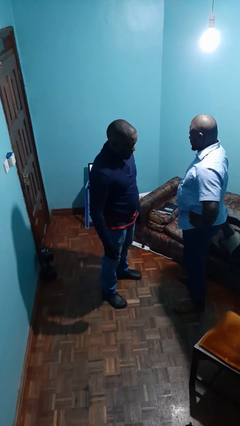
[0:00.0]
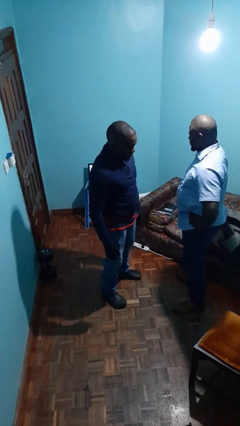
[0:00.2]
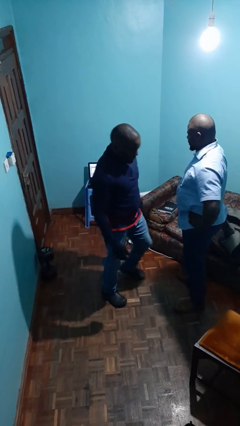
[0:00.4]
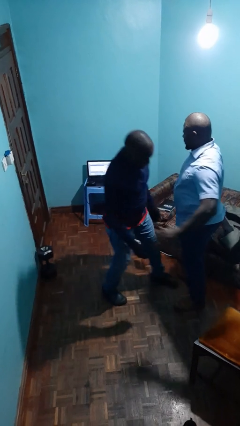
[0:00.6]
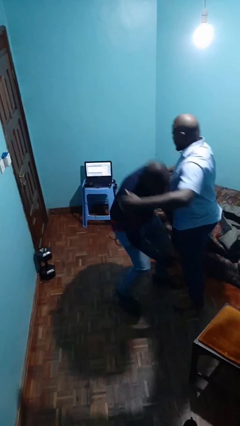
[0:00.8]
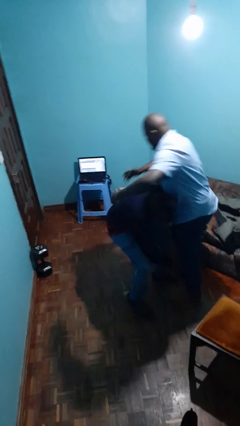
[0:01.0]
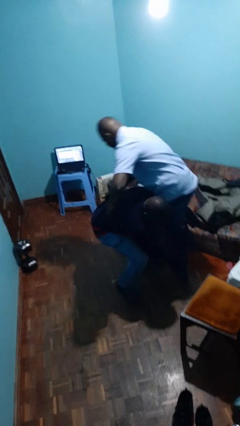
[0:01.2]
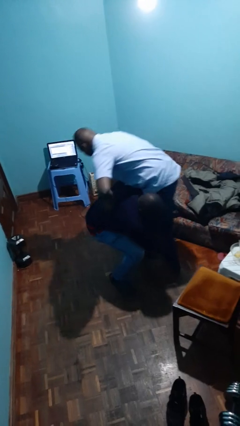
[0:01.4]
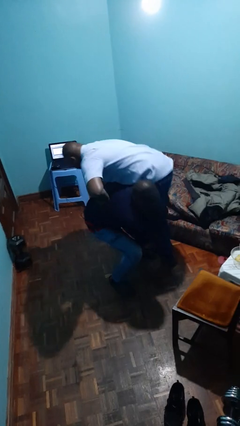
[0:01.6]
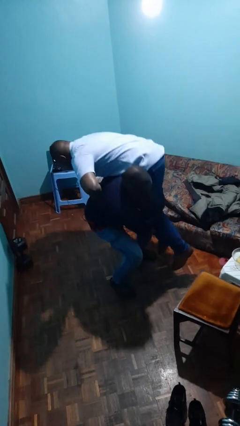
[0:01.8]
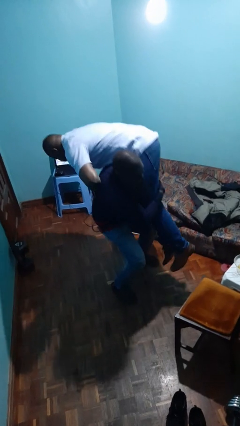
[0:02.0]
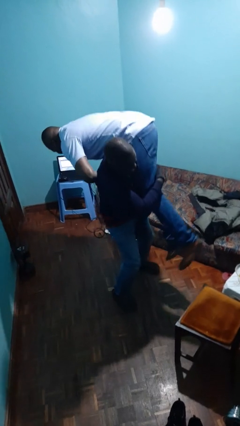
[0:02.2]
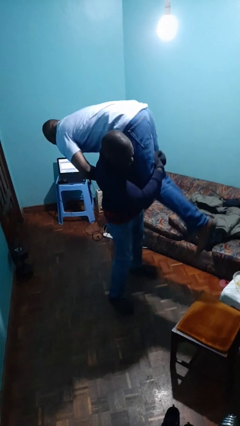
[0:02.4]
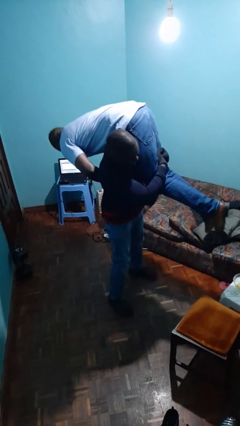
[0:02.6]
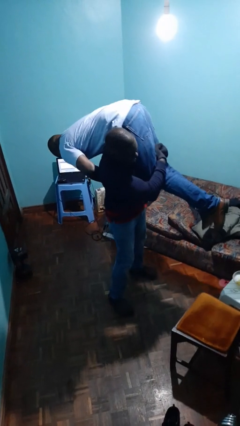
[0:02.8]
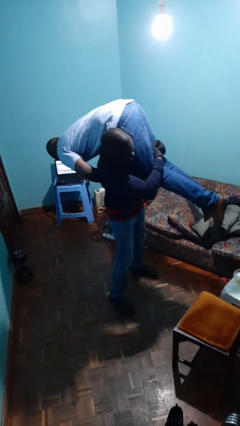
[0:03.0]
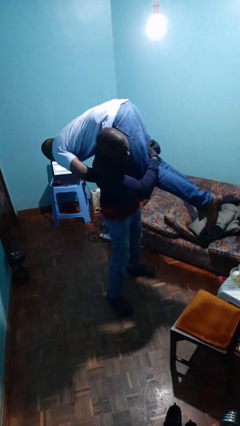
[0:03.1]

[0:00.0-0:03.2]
person carries person over shoulder

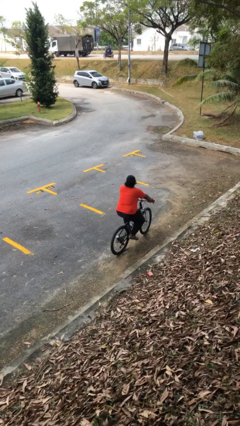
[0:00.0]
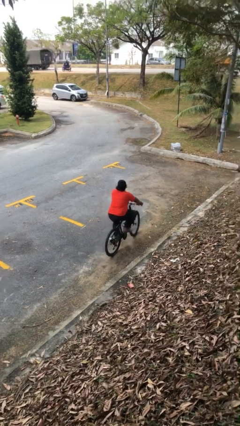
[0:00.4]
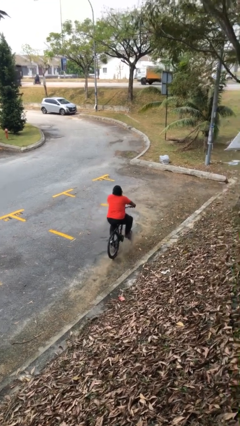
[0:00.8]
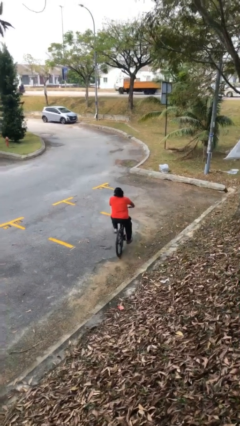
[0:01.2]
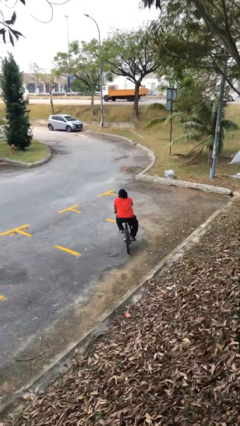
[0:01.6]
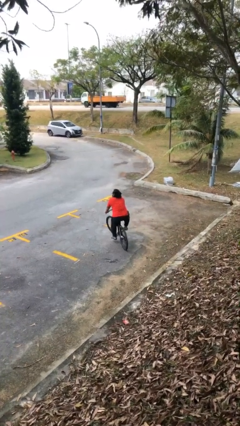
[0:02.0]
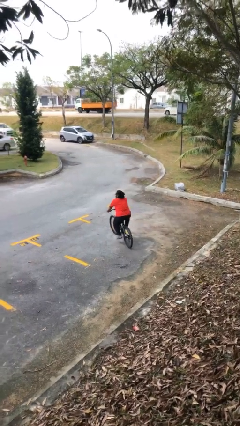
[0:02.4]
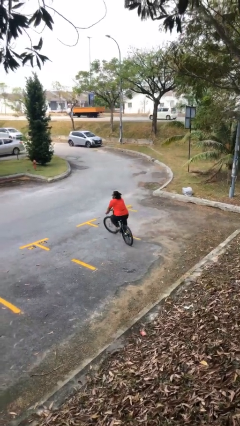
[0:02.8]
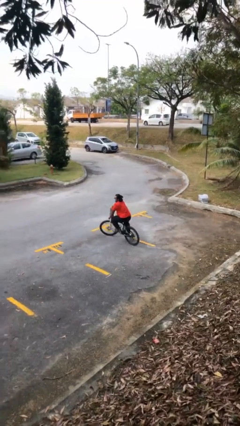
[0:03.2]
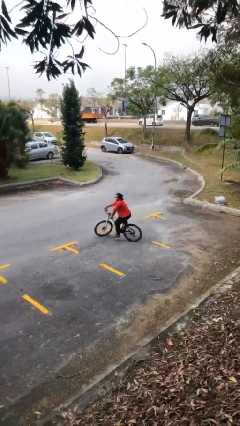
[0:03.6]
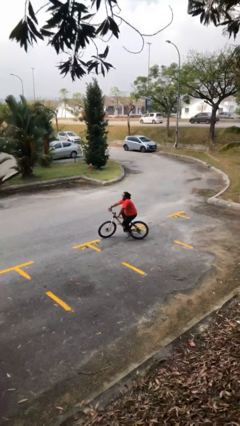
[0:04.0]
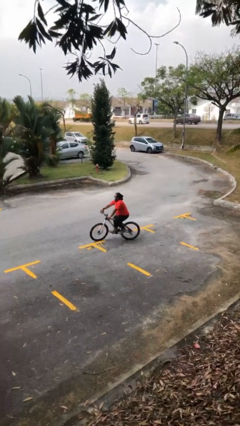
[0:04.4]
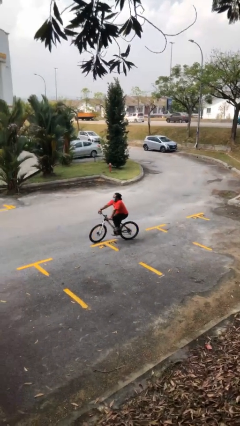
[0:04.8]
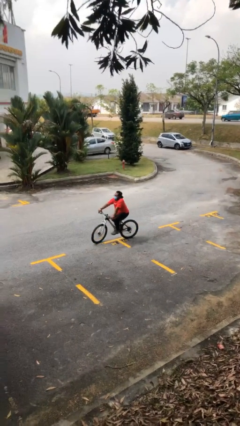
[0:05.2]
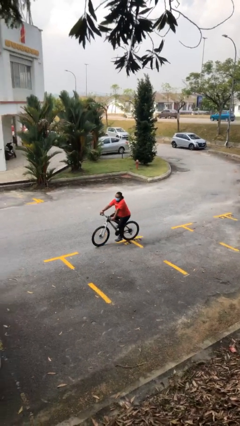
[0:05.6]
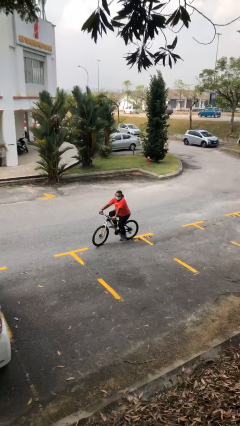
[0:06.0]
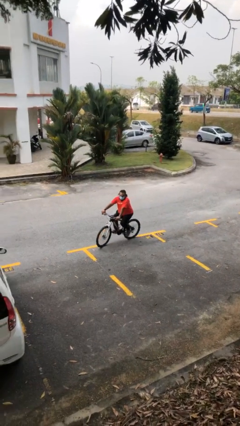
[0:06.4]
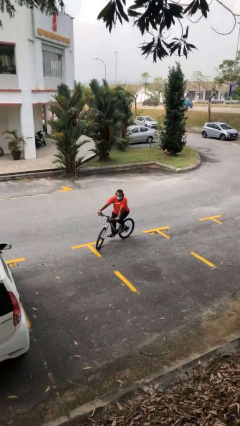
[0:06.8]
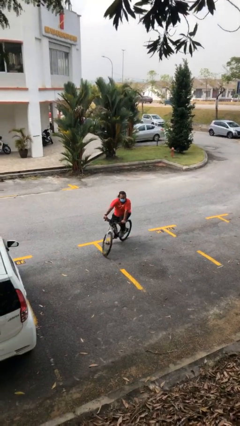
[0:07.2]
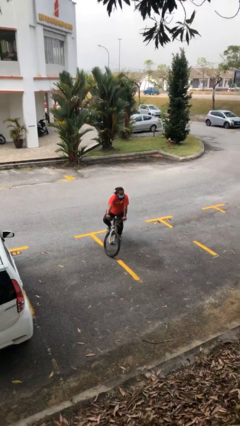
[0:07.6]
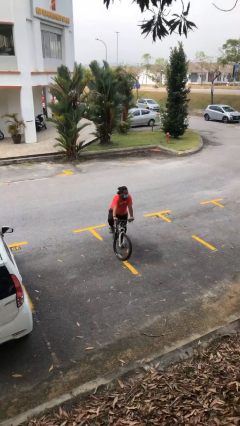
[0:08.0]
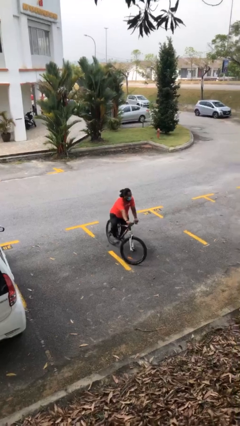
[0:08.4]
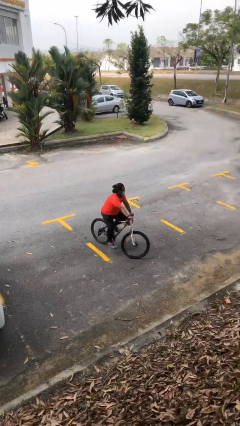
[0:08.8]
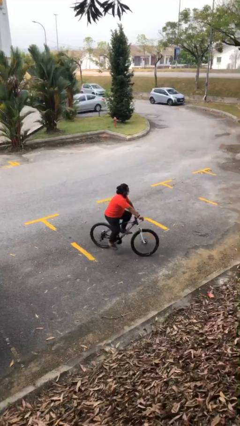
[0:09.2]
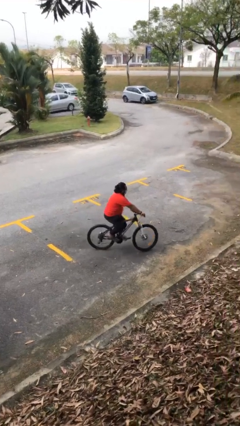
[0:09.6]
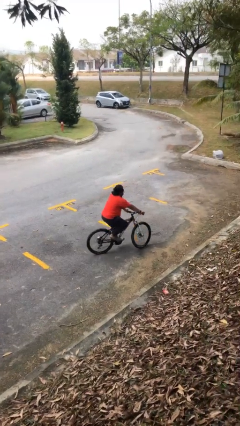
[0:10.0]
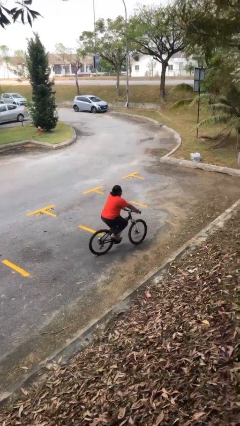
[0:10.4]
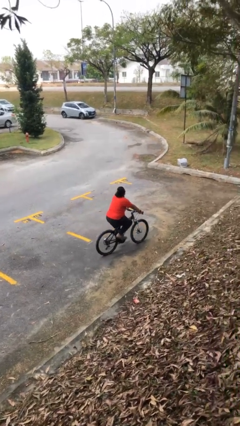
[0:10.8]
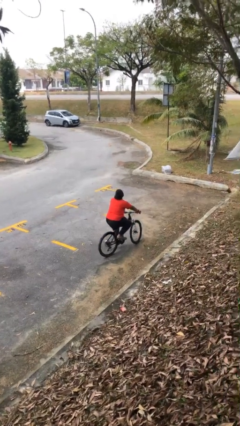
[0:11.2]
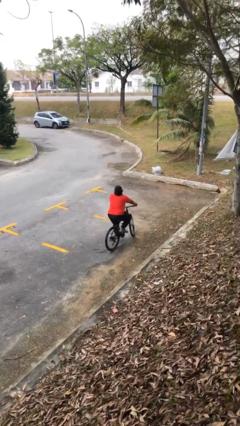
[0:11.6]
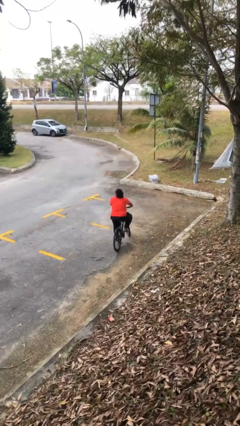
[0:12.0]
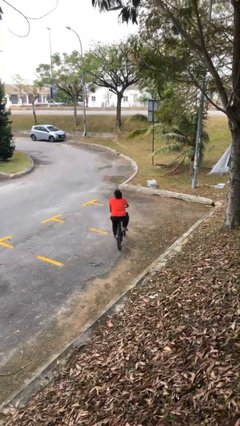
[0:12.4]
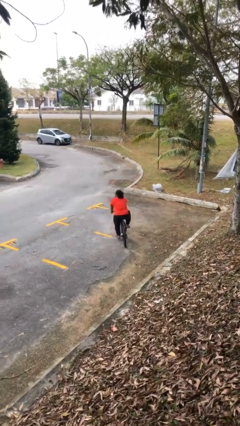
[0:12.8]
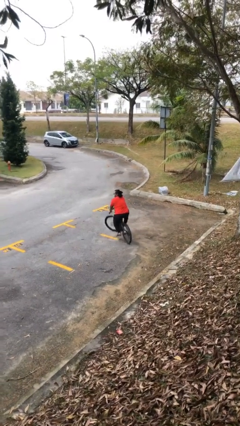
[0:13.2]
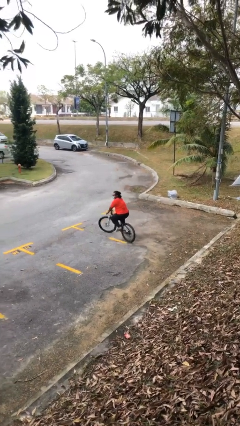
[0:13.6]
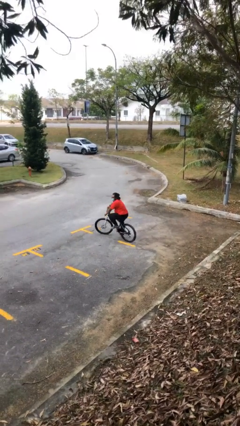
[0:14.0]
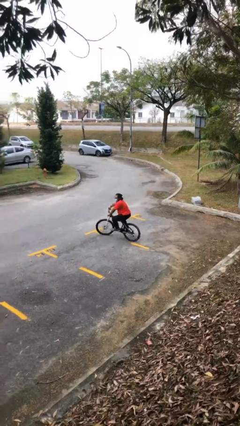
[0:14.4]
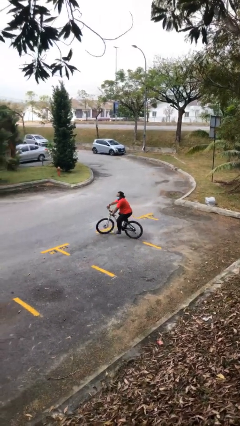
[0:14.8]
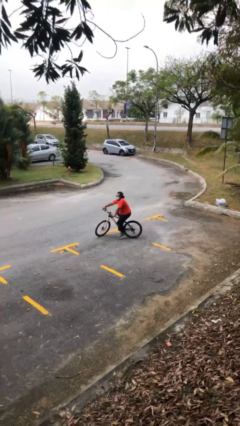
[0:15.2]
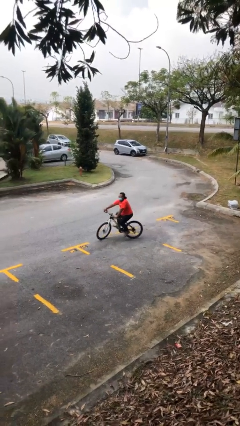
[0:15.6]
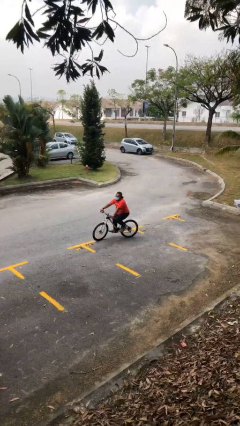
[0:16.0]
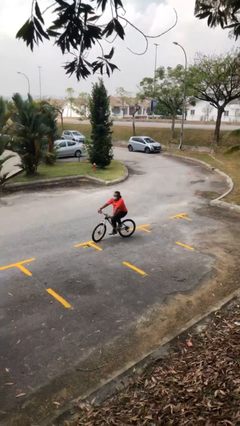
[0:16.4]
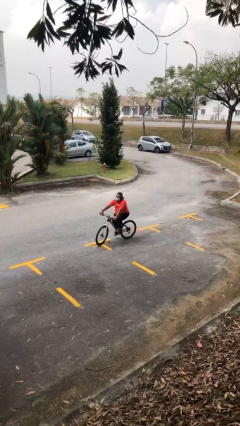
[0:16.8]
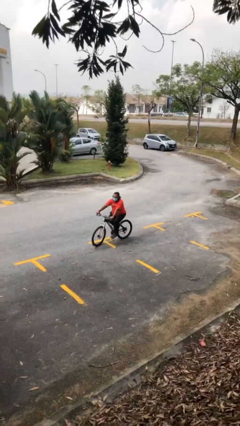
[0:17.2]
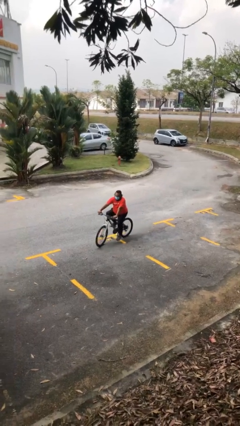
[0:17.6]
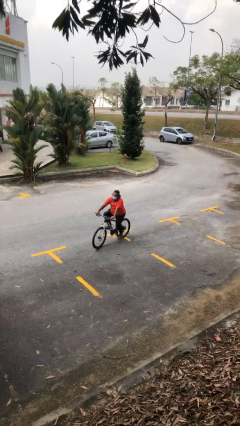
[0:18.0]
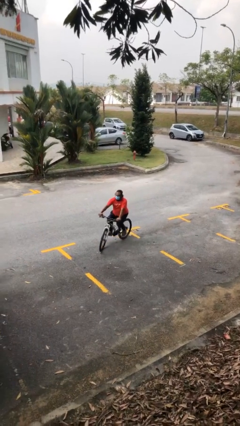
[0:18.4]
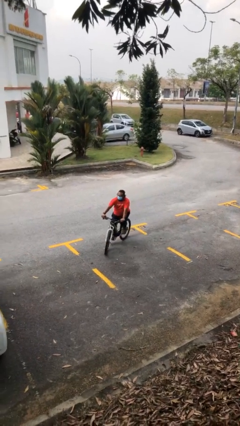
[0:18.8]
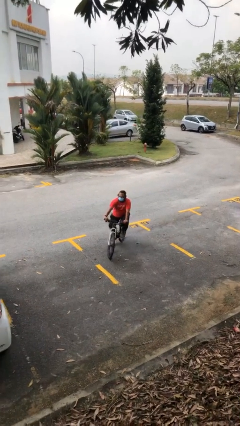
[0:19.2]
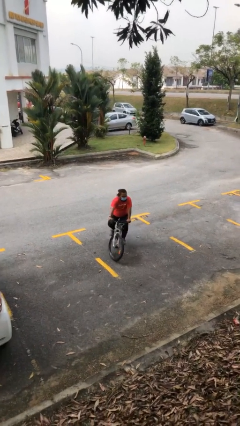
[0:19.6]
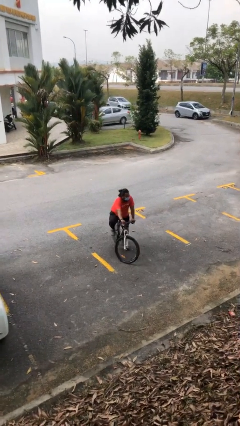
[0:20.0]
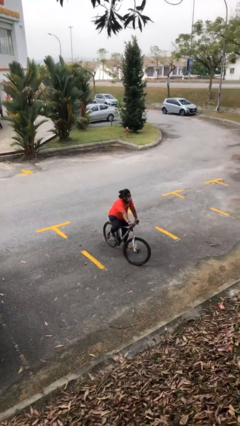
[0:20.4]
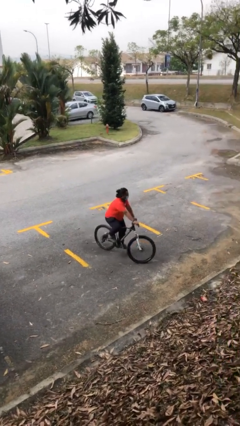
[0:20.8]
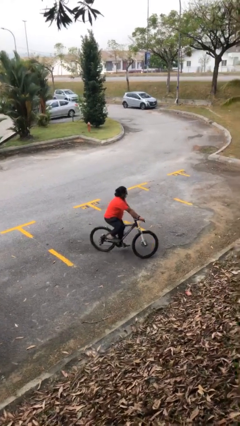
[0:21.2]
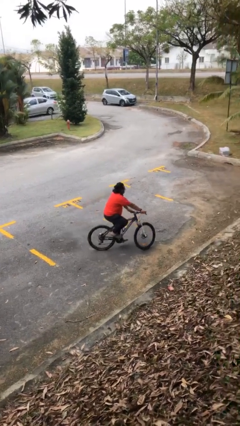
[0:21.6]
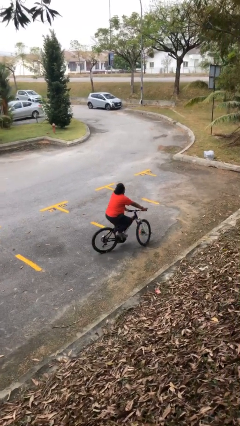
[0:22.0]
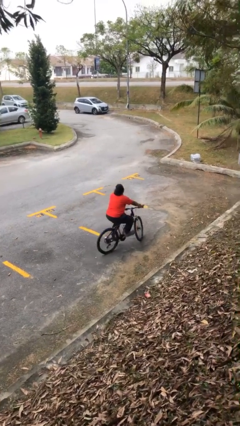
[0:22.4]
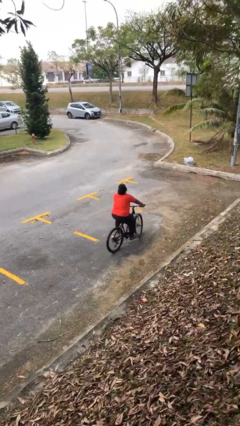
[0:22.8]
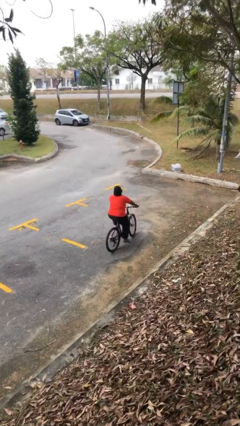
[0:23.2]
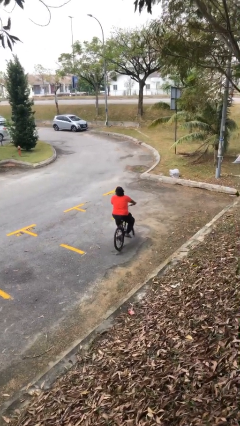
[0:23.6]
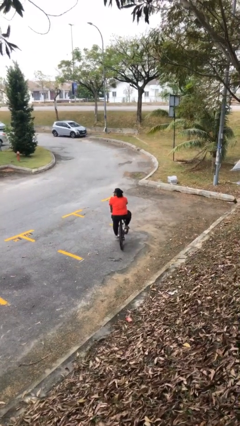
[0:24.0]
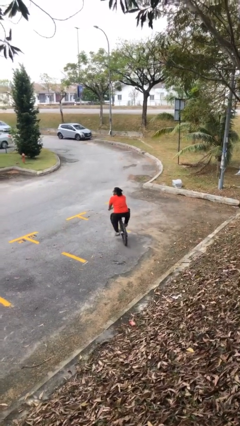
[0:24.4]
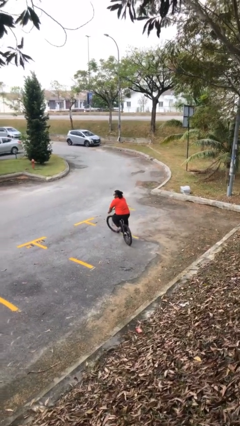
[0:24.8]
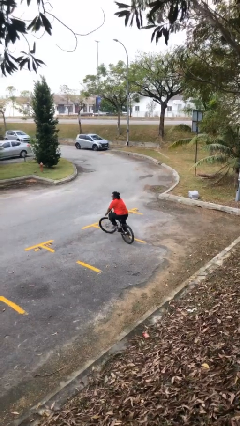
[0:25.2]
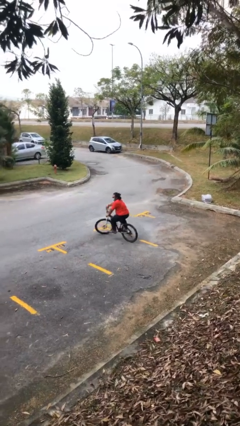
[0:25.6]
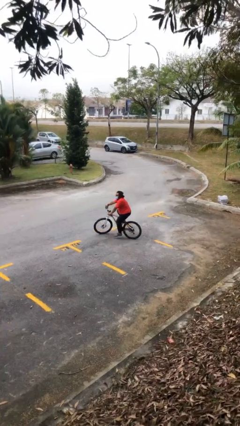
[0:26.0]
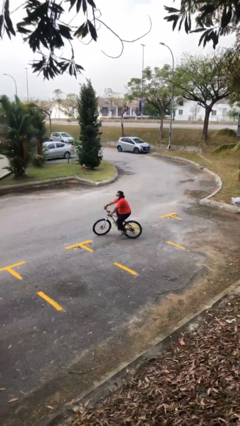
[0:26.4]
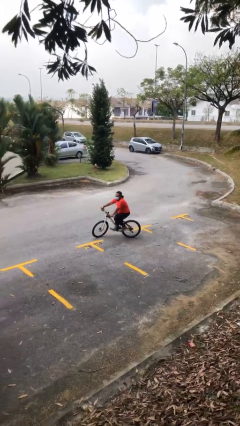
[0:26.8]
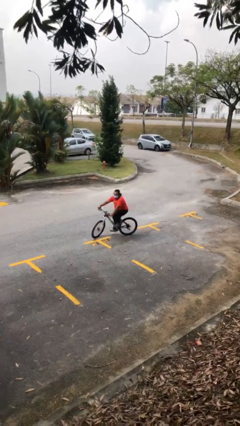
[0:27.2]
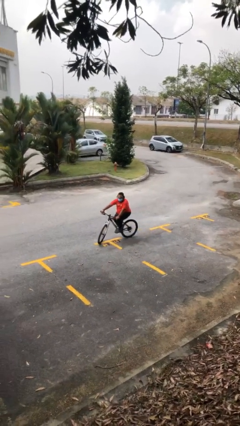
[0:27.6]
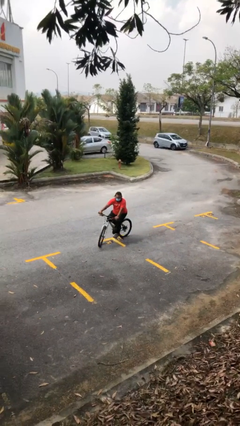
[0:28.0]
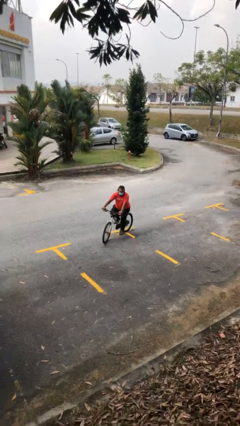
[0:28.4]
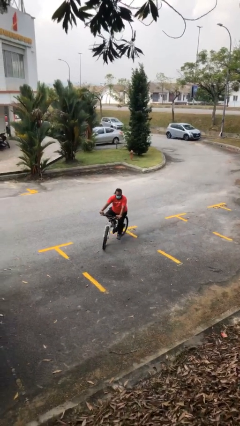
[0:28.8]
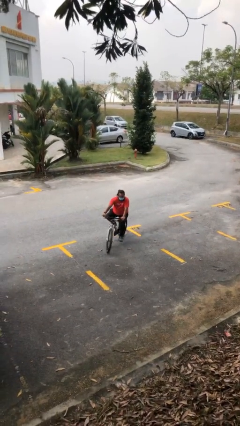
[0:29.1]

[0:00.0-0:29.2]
person rides bicycle

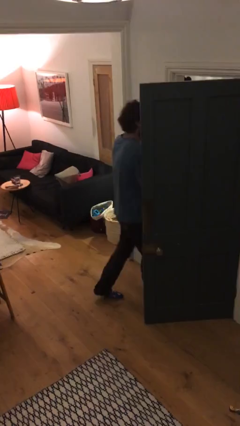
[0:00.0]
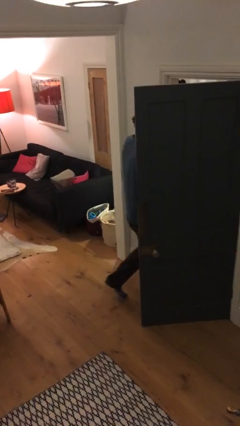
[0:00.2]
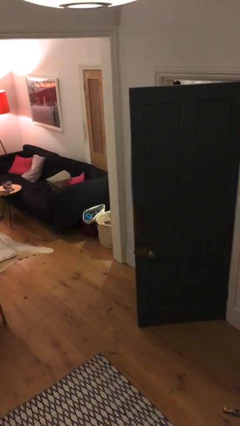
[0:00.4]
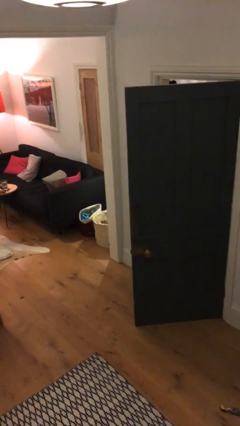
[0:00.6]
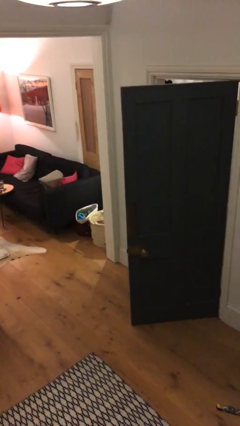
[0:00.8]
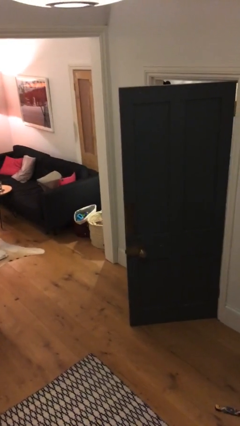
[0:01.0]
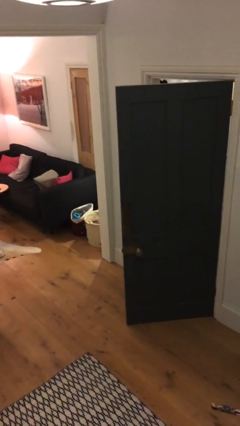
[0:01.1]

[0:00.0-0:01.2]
person exits scene through structure
